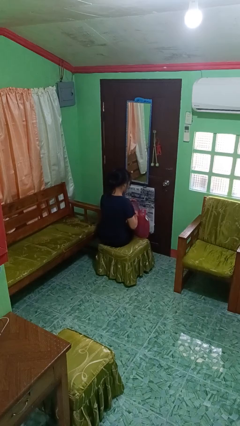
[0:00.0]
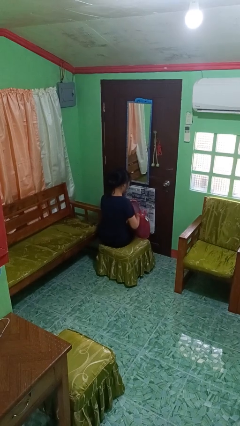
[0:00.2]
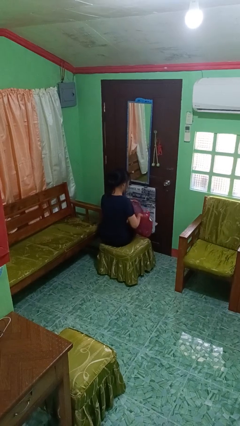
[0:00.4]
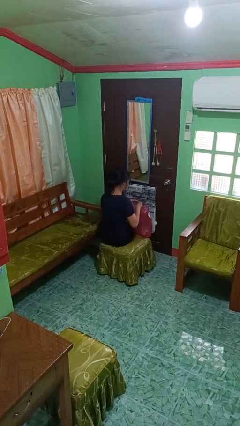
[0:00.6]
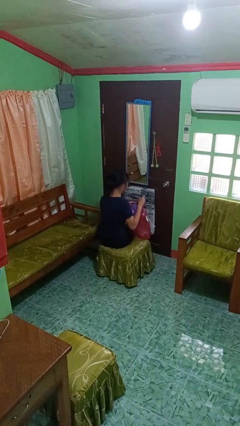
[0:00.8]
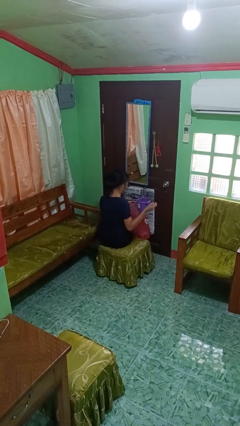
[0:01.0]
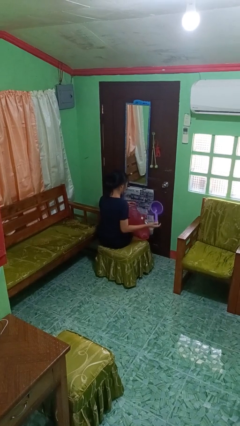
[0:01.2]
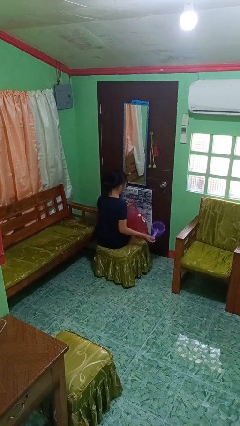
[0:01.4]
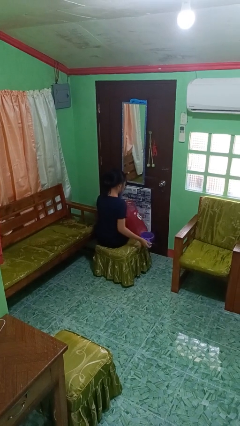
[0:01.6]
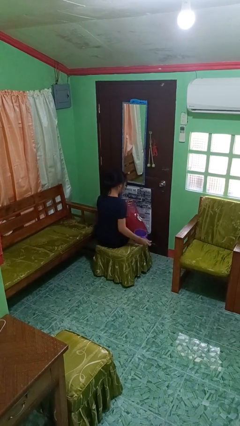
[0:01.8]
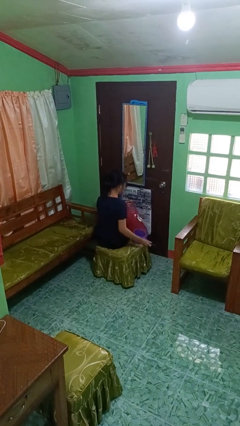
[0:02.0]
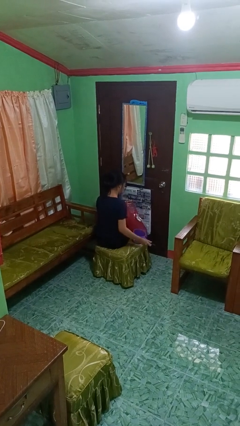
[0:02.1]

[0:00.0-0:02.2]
person takes object from bag

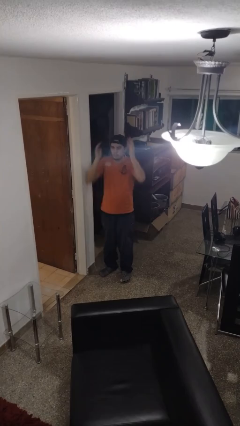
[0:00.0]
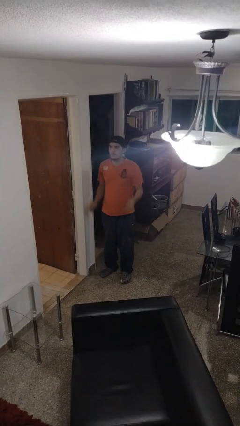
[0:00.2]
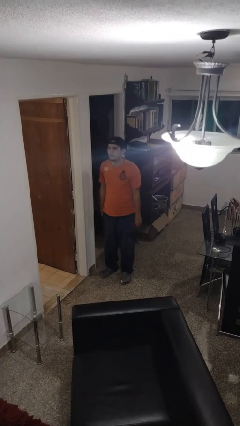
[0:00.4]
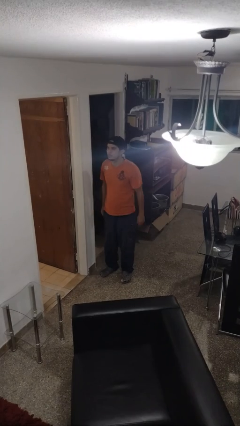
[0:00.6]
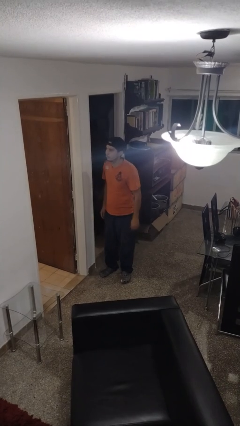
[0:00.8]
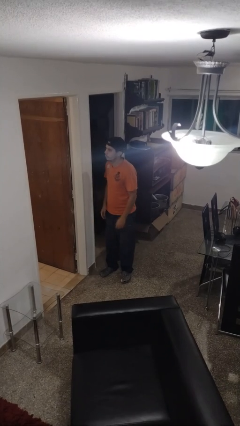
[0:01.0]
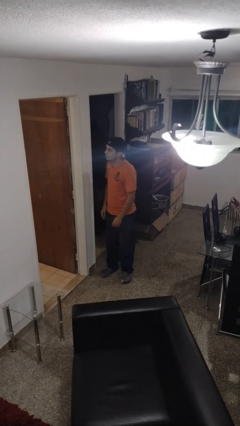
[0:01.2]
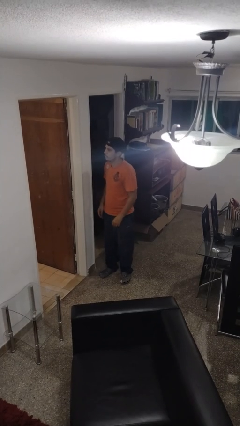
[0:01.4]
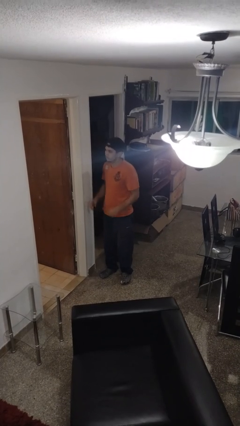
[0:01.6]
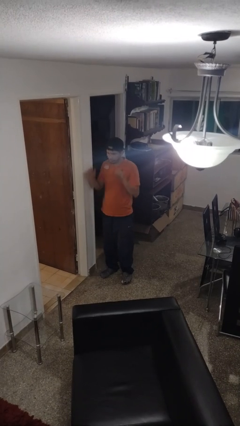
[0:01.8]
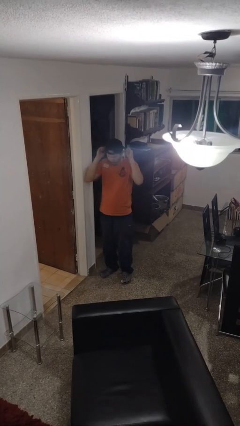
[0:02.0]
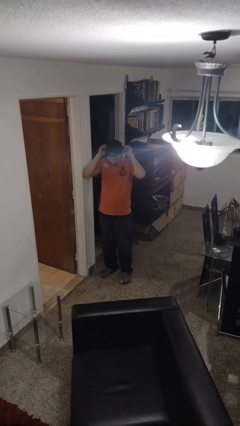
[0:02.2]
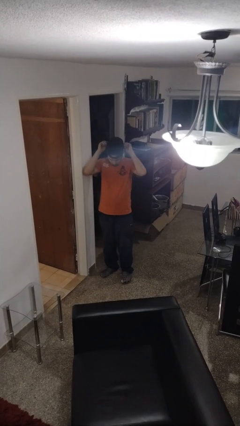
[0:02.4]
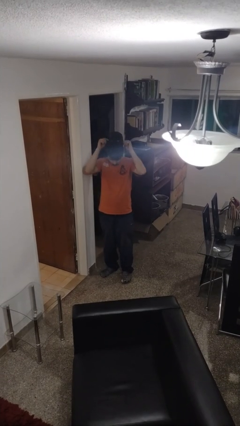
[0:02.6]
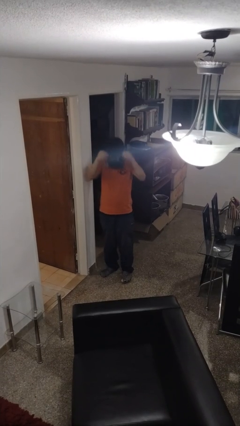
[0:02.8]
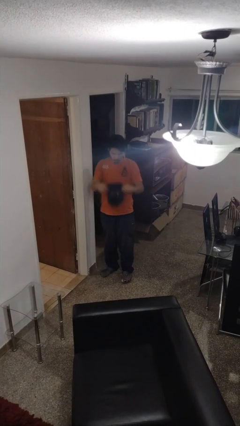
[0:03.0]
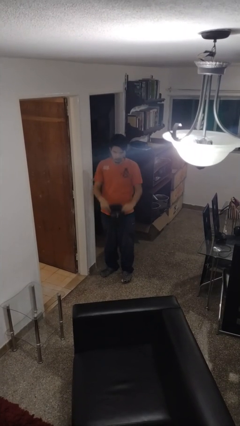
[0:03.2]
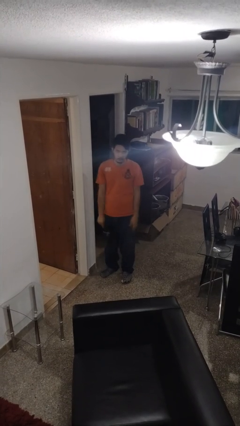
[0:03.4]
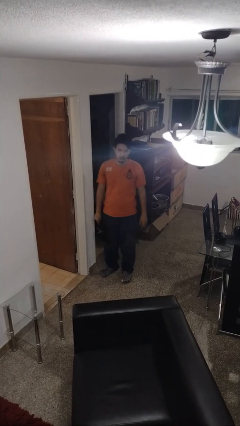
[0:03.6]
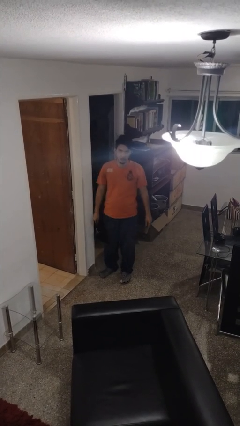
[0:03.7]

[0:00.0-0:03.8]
person takes off hat

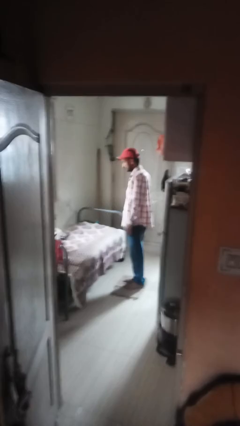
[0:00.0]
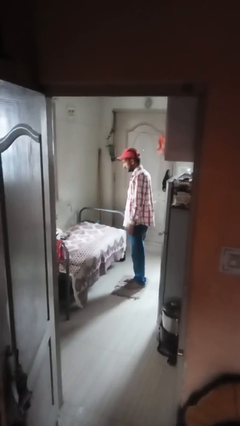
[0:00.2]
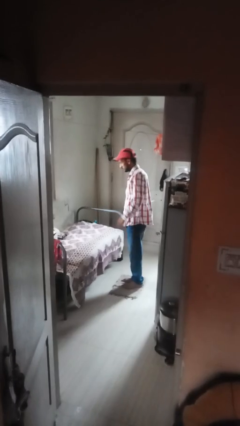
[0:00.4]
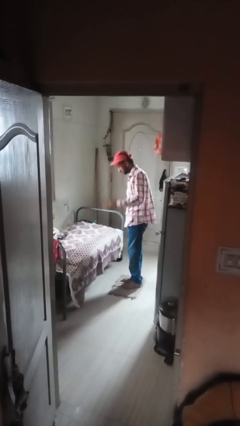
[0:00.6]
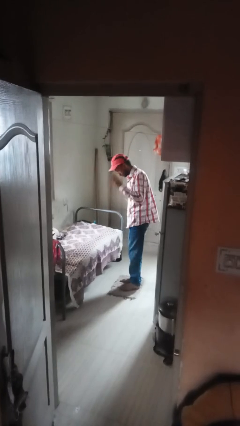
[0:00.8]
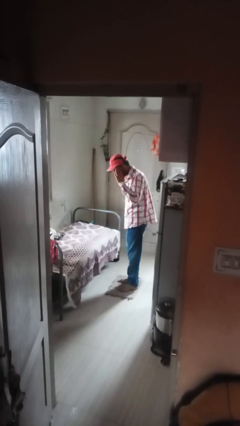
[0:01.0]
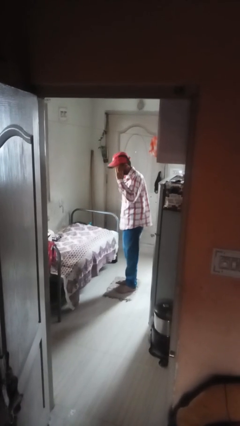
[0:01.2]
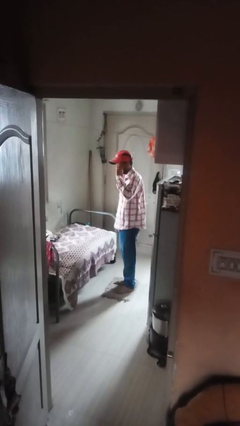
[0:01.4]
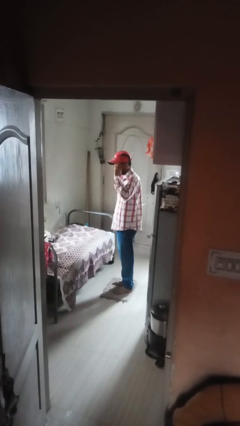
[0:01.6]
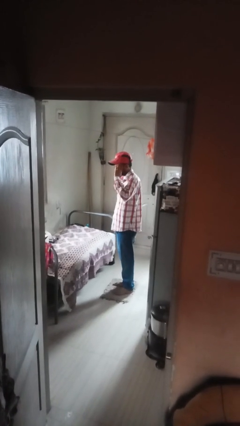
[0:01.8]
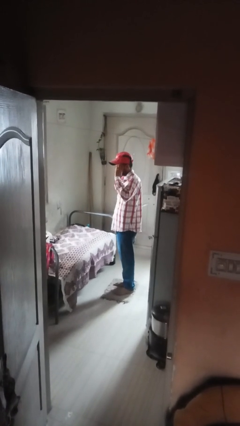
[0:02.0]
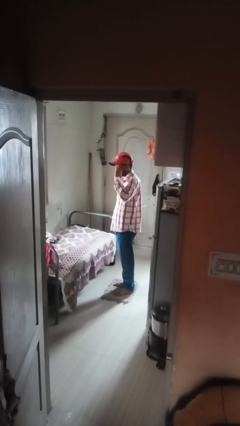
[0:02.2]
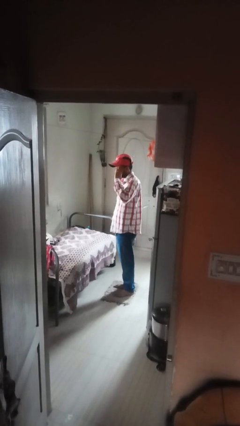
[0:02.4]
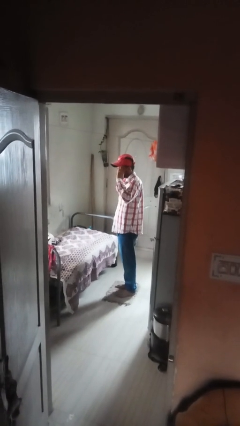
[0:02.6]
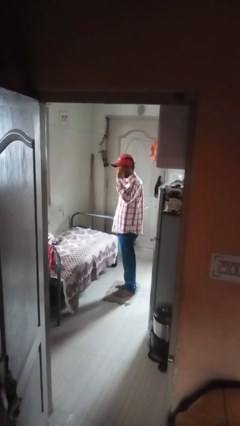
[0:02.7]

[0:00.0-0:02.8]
person salutes

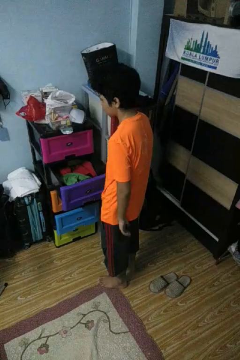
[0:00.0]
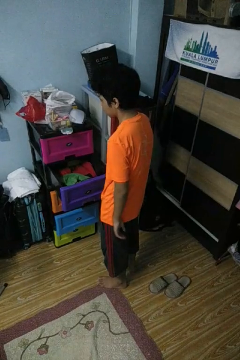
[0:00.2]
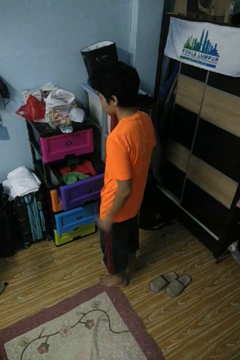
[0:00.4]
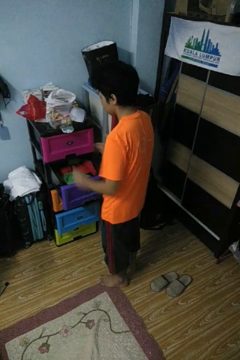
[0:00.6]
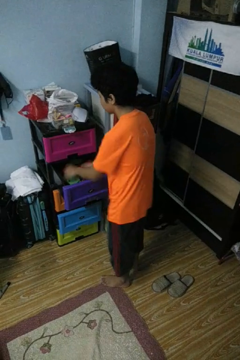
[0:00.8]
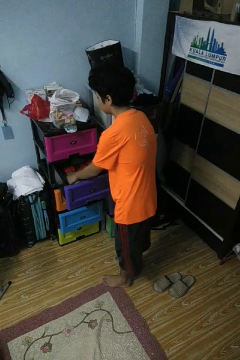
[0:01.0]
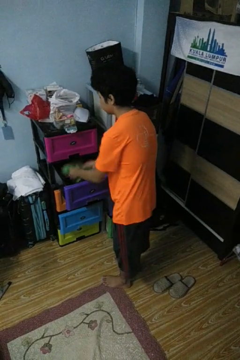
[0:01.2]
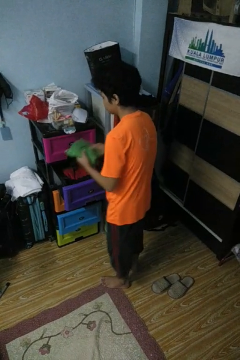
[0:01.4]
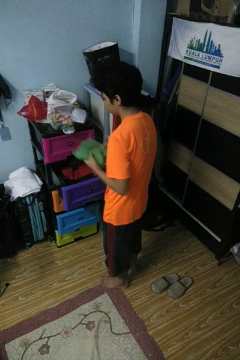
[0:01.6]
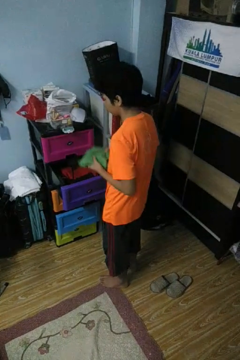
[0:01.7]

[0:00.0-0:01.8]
person takes clothes from dresser

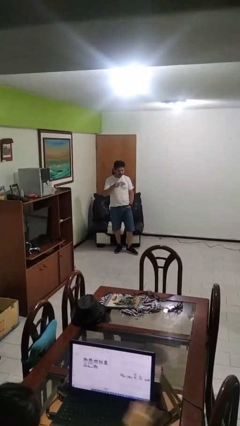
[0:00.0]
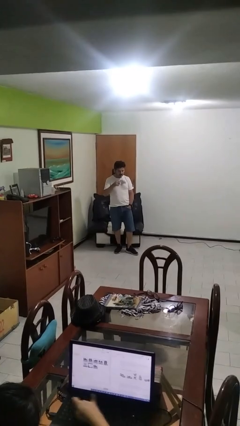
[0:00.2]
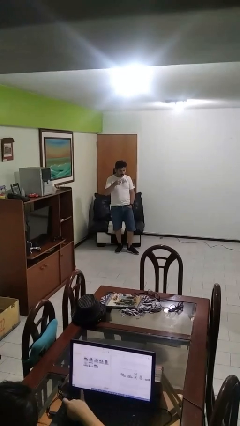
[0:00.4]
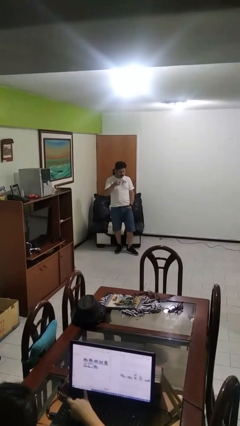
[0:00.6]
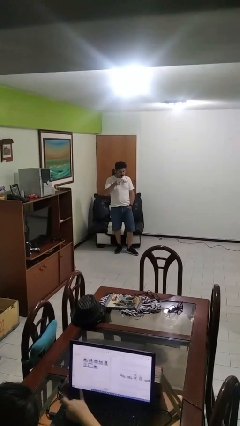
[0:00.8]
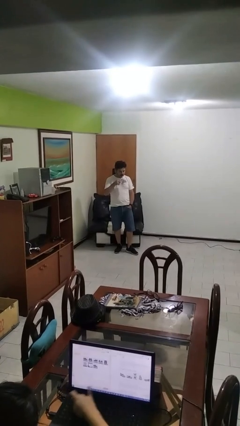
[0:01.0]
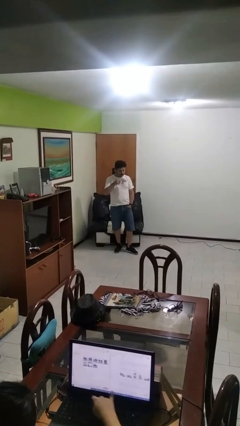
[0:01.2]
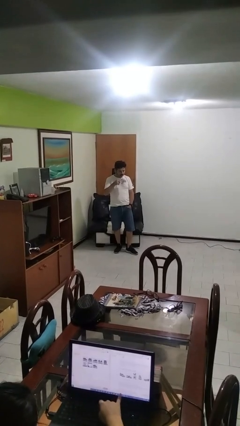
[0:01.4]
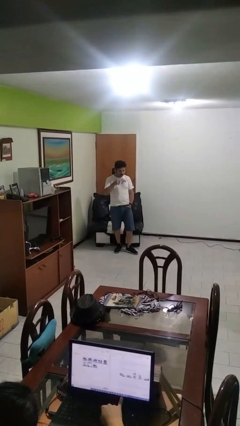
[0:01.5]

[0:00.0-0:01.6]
person drinks from straw

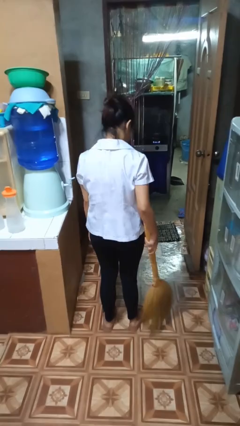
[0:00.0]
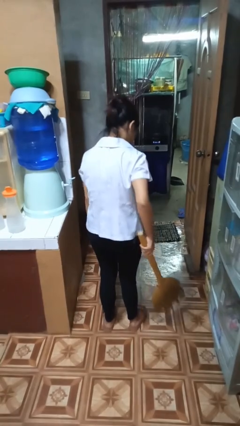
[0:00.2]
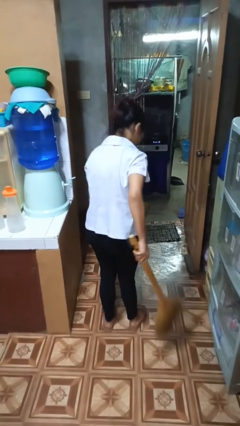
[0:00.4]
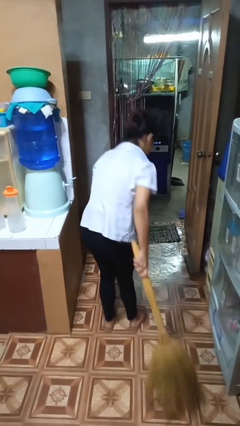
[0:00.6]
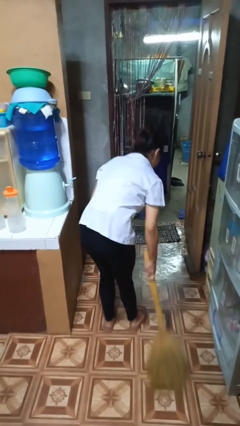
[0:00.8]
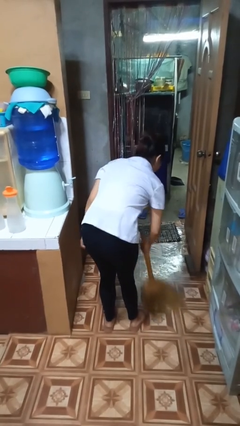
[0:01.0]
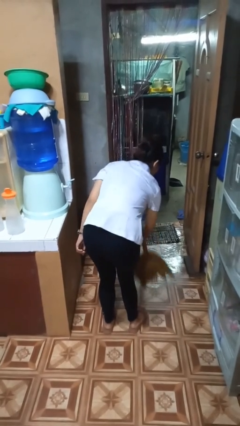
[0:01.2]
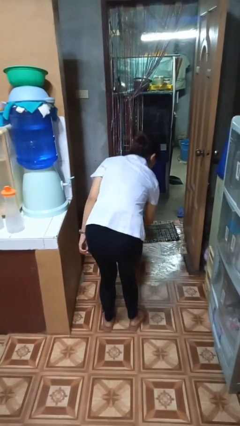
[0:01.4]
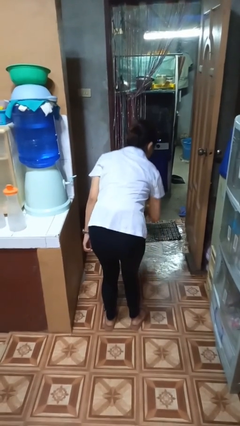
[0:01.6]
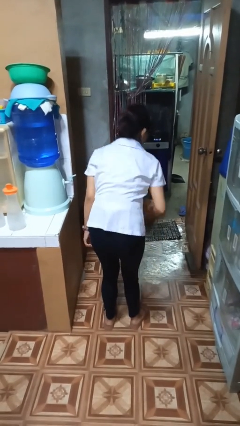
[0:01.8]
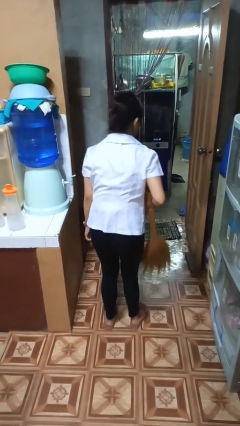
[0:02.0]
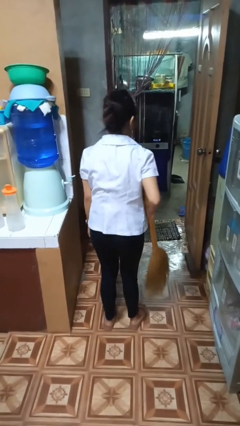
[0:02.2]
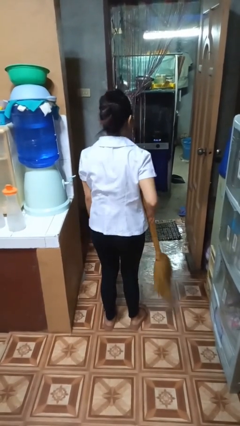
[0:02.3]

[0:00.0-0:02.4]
person sweeps floor

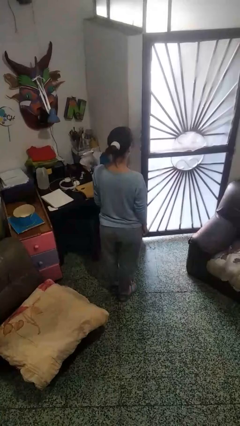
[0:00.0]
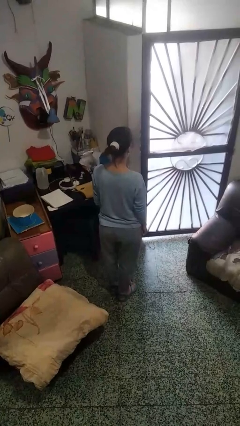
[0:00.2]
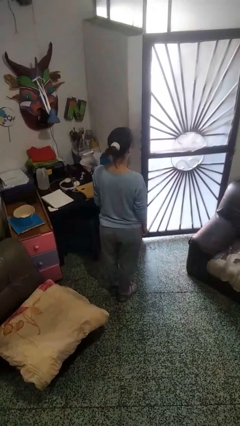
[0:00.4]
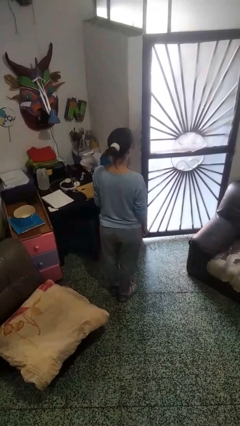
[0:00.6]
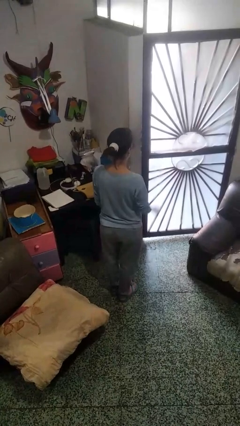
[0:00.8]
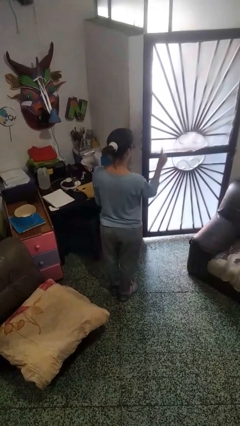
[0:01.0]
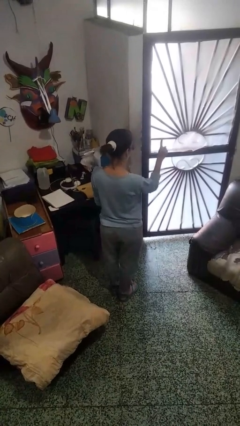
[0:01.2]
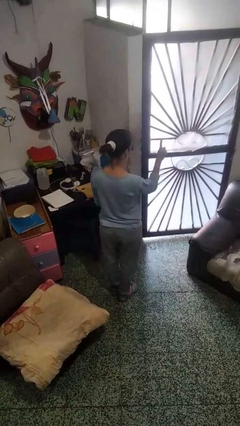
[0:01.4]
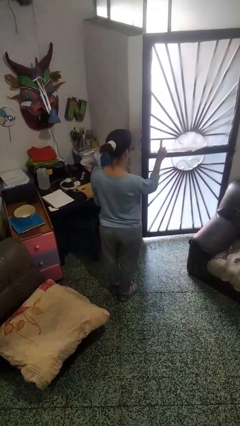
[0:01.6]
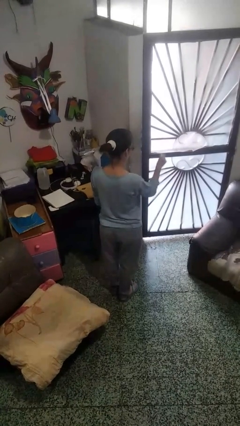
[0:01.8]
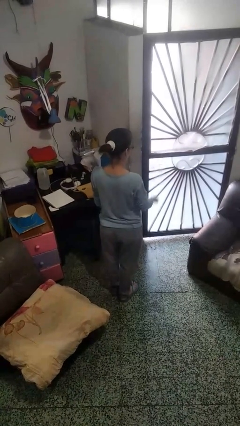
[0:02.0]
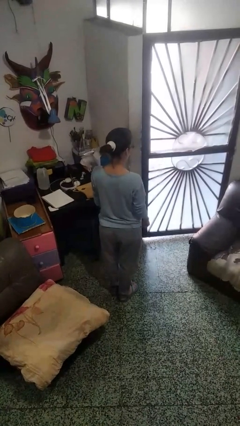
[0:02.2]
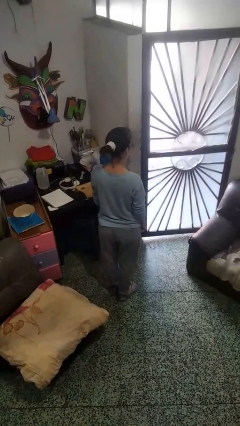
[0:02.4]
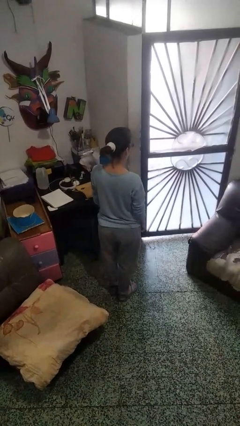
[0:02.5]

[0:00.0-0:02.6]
person gestures number one
